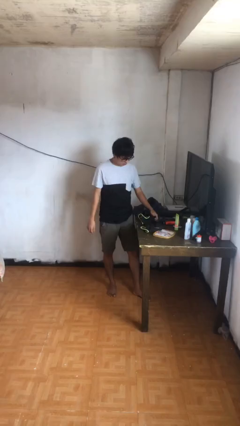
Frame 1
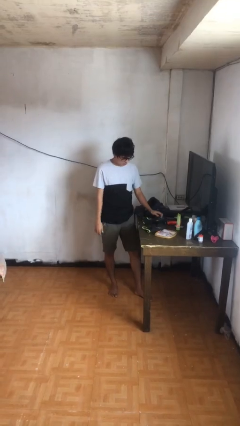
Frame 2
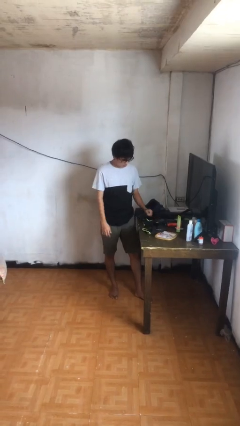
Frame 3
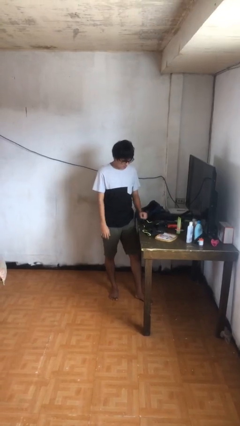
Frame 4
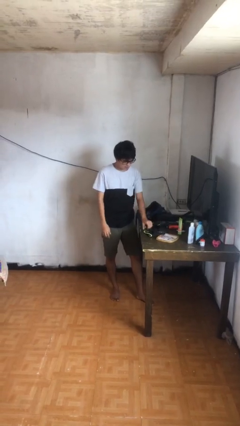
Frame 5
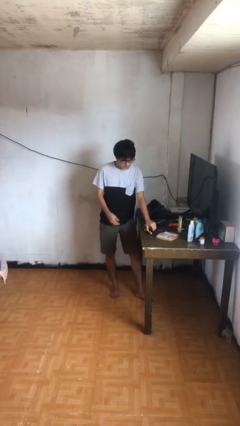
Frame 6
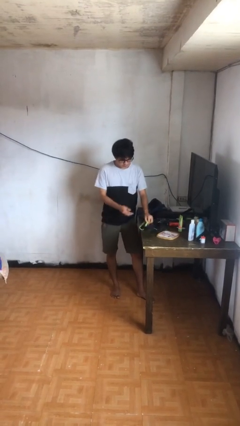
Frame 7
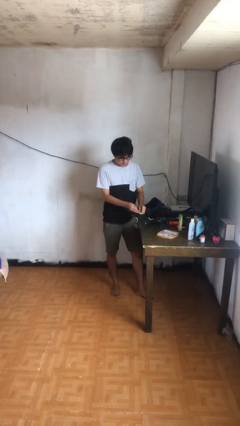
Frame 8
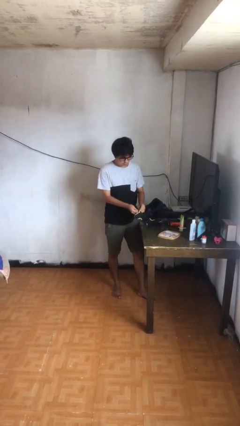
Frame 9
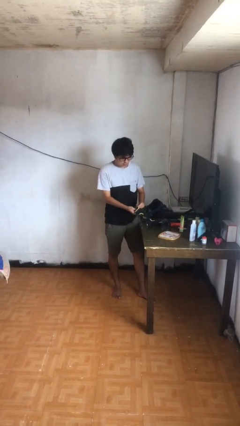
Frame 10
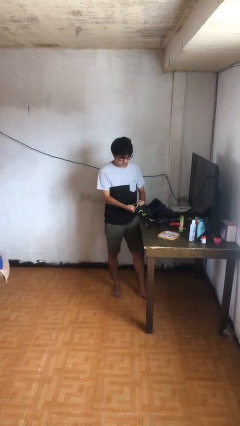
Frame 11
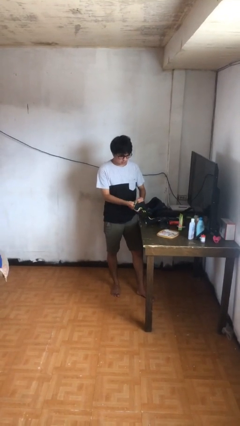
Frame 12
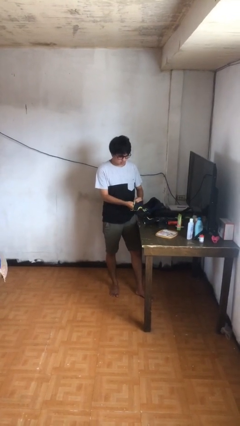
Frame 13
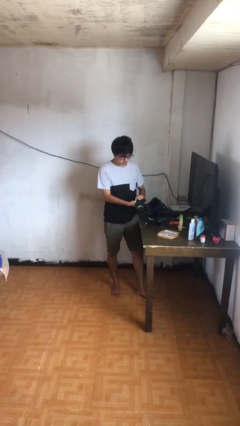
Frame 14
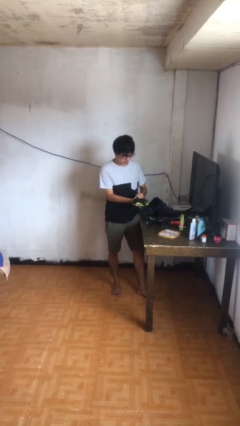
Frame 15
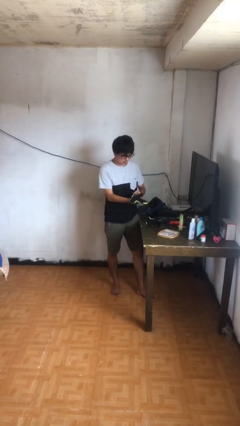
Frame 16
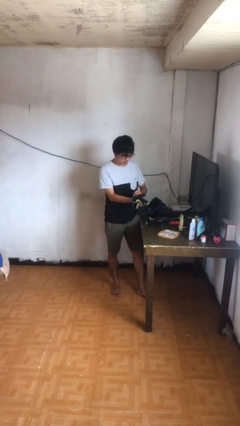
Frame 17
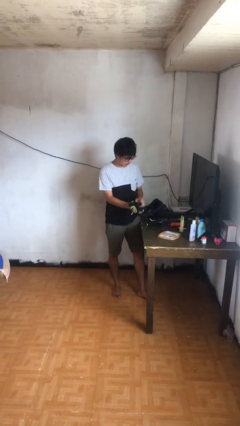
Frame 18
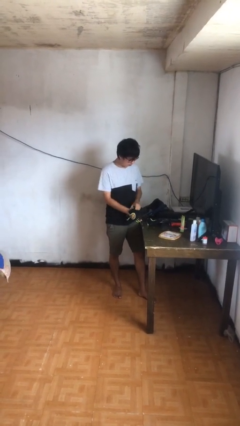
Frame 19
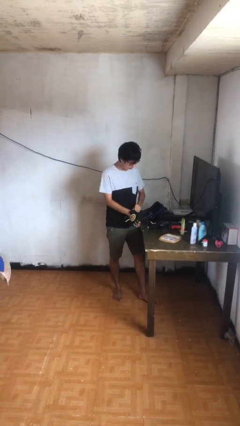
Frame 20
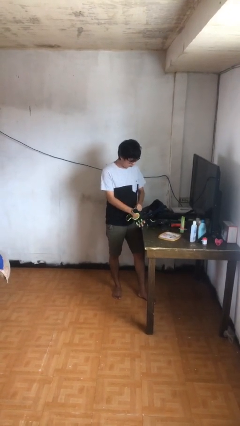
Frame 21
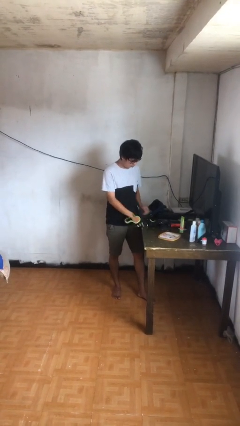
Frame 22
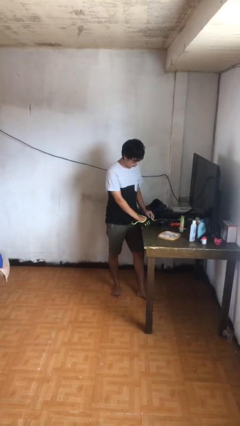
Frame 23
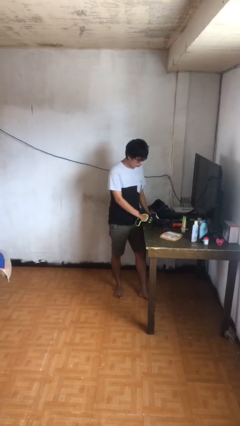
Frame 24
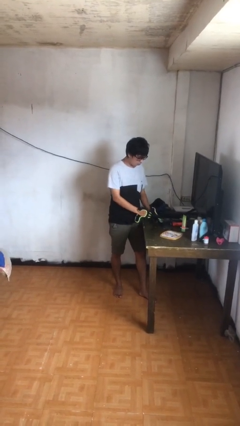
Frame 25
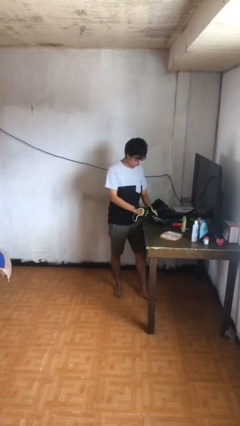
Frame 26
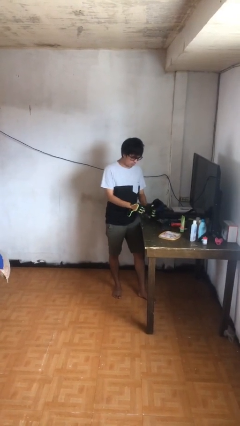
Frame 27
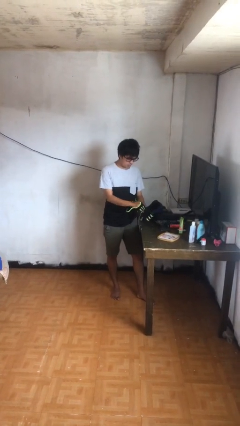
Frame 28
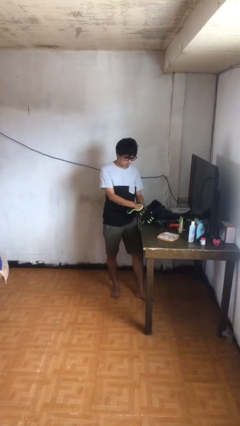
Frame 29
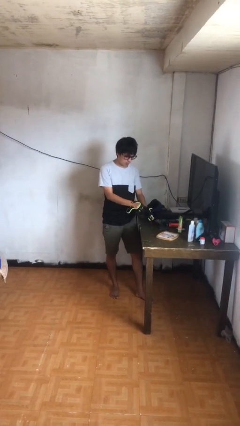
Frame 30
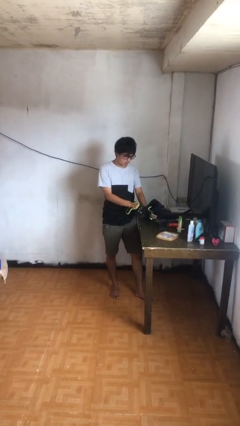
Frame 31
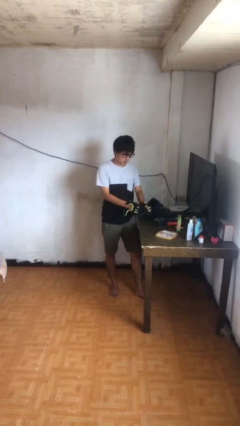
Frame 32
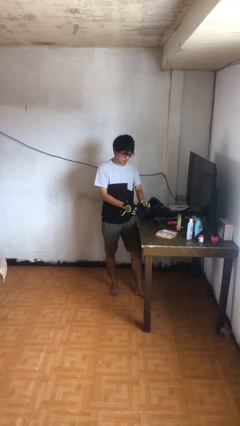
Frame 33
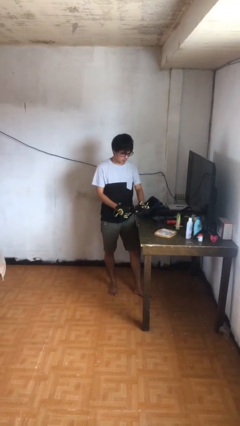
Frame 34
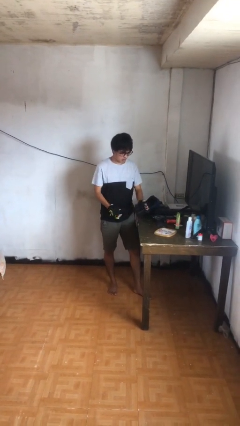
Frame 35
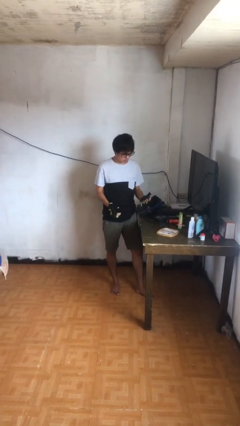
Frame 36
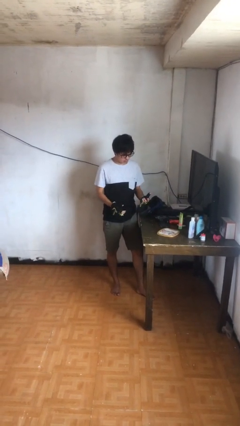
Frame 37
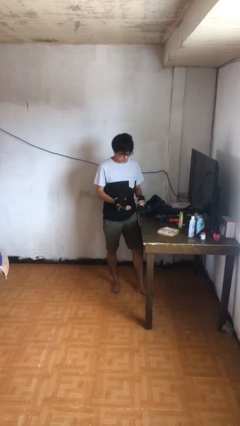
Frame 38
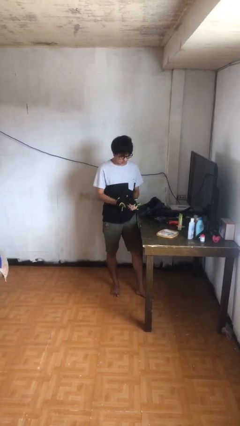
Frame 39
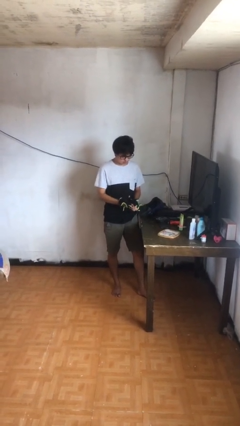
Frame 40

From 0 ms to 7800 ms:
person puts on gloves

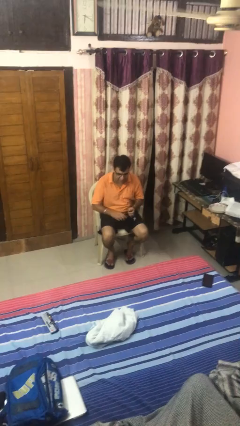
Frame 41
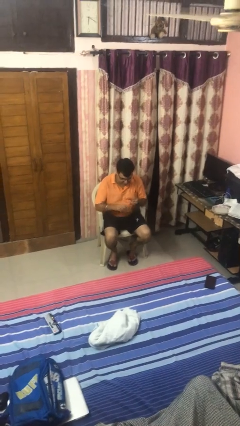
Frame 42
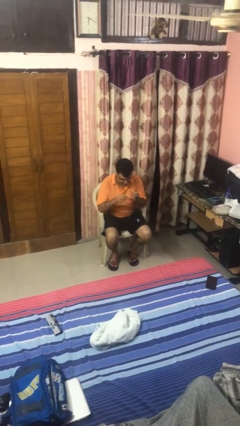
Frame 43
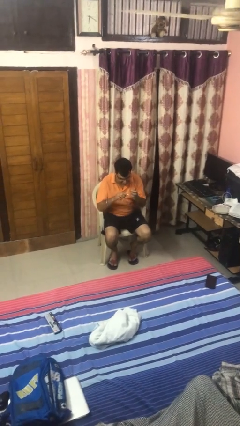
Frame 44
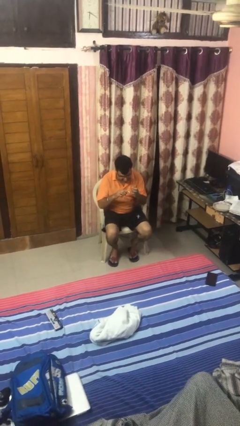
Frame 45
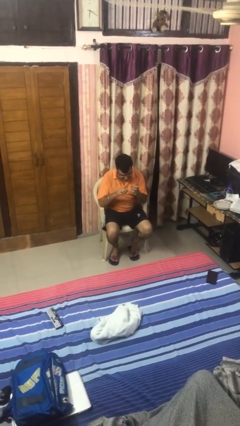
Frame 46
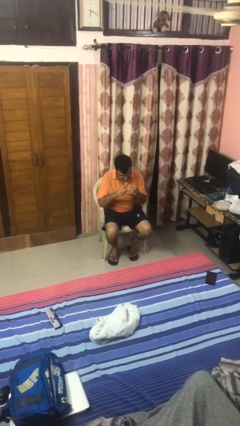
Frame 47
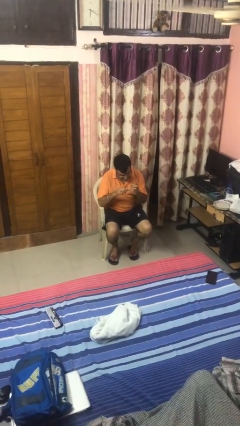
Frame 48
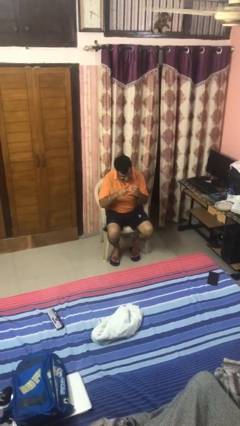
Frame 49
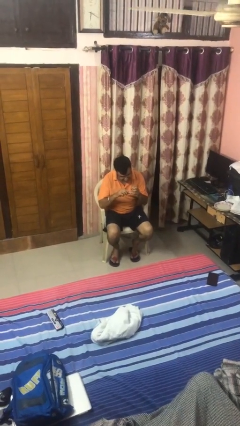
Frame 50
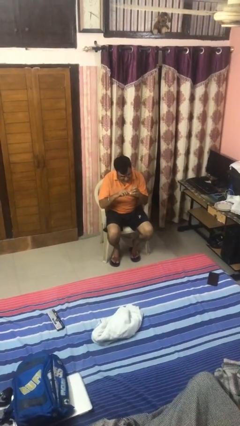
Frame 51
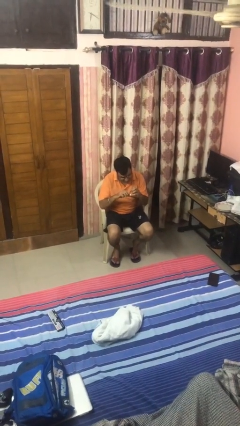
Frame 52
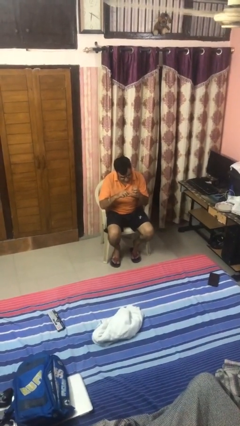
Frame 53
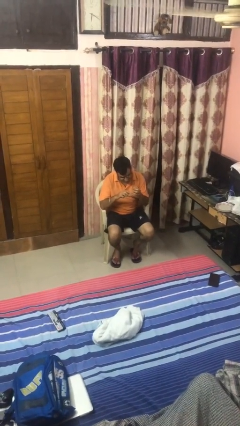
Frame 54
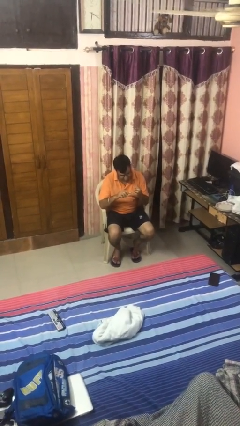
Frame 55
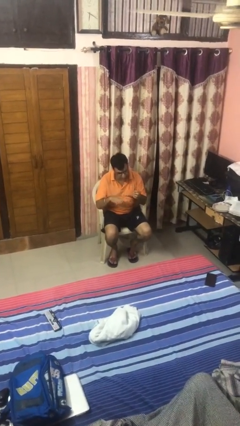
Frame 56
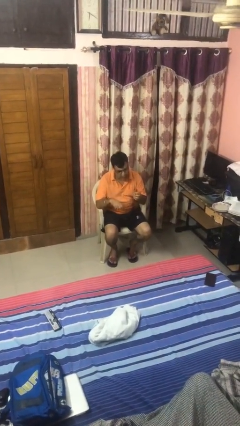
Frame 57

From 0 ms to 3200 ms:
person clips fingernails

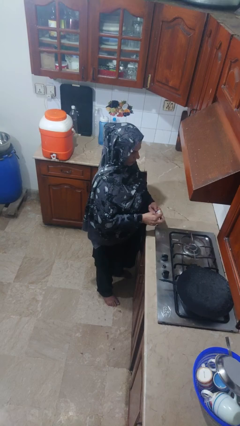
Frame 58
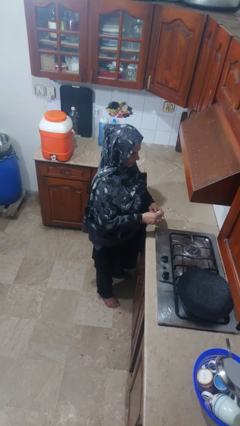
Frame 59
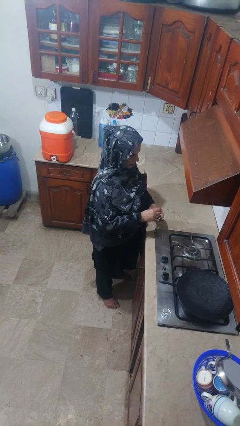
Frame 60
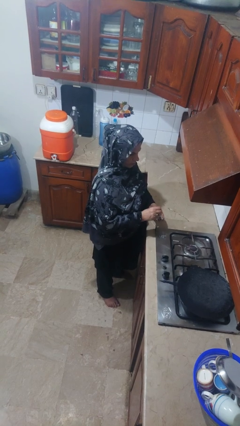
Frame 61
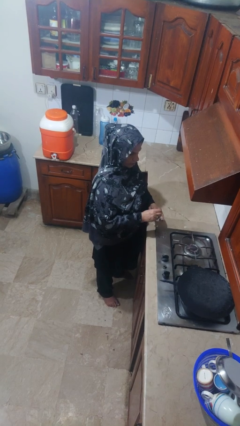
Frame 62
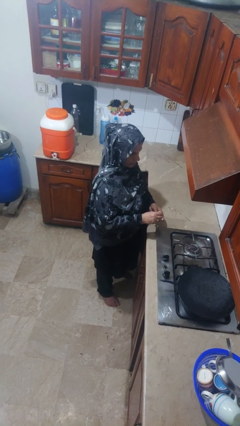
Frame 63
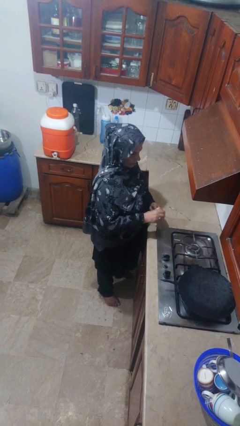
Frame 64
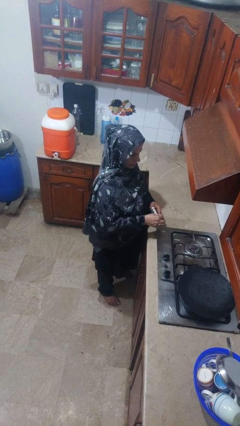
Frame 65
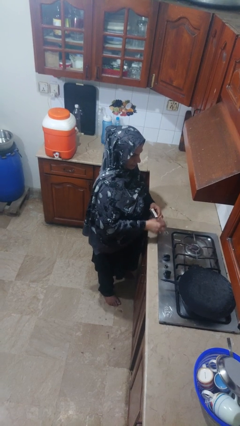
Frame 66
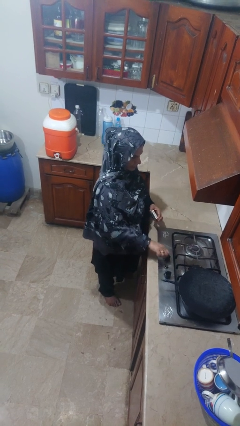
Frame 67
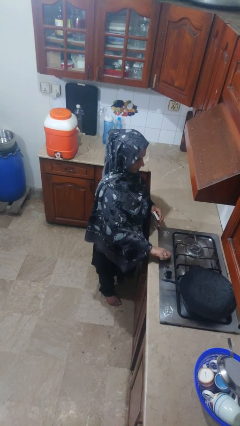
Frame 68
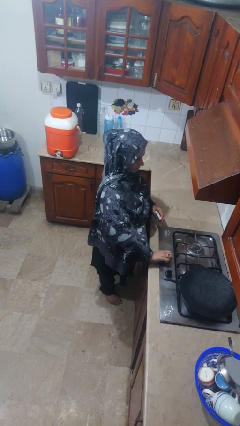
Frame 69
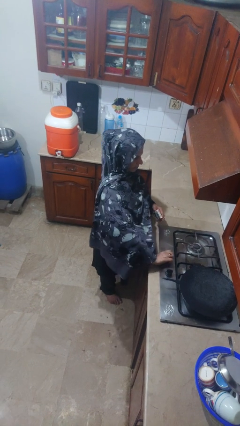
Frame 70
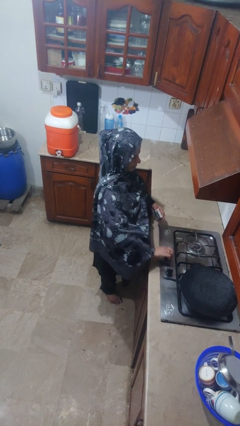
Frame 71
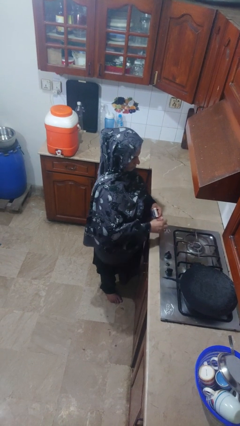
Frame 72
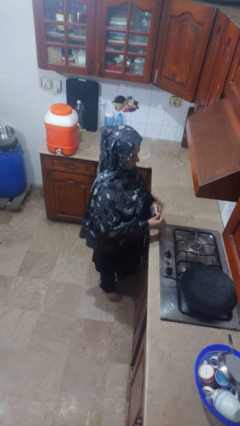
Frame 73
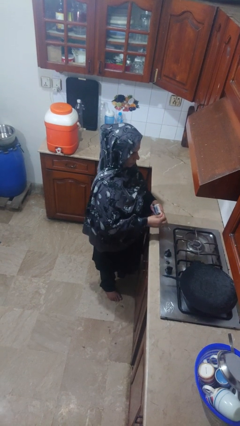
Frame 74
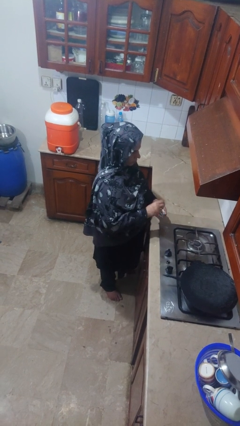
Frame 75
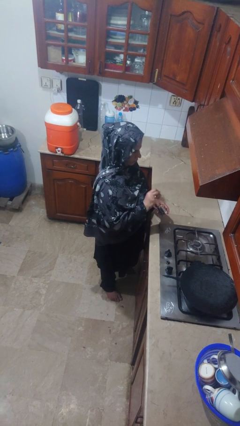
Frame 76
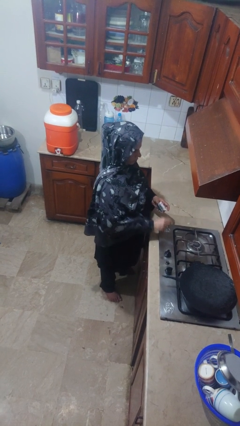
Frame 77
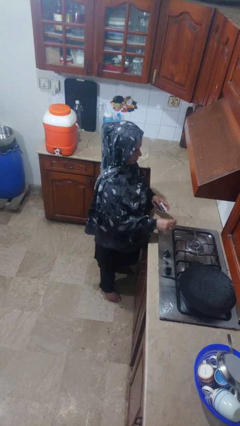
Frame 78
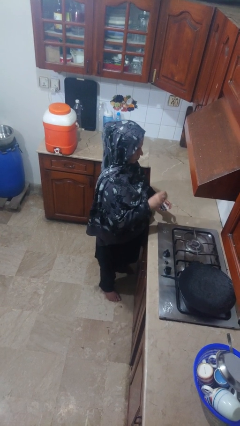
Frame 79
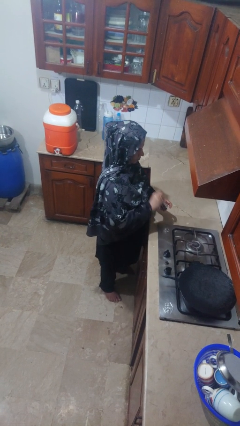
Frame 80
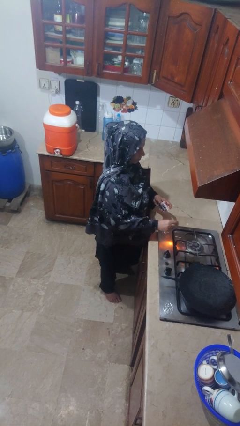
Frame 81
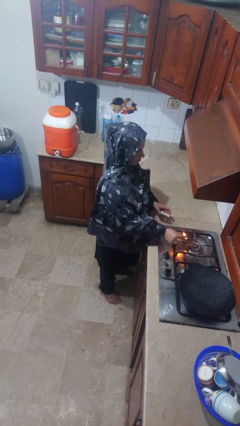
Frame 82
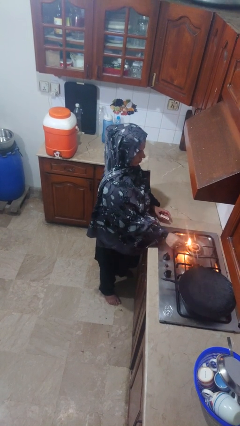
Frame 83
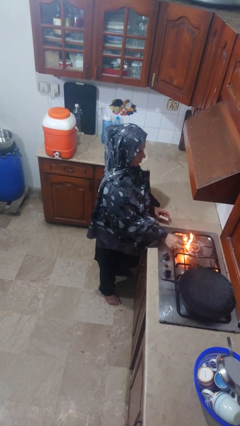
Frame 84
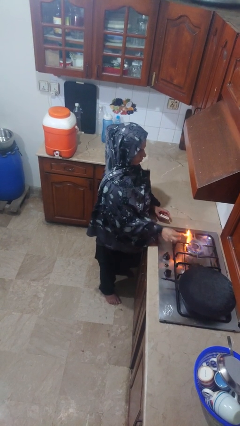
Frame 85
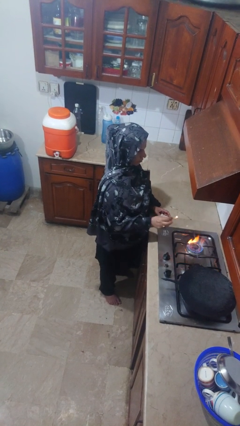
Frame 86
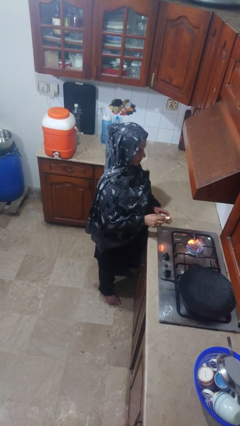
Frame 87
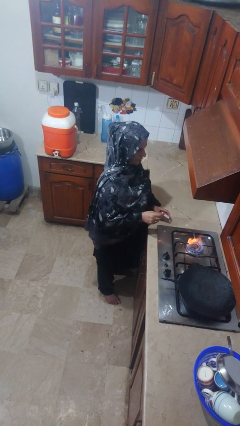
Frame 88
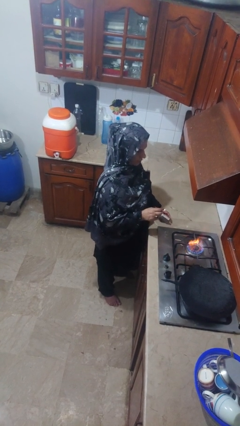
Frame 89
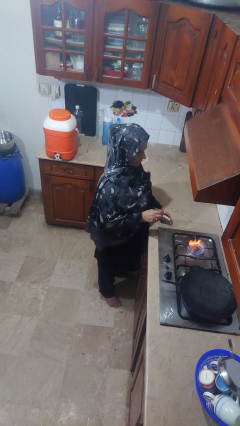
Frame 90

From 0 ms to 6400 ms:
person turns on stovetop

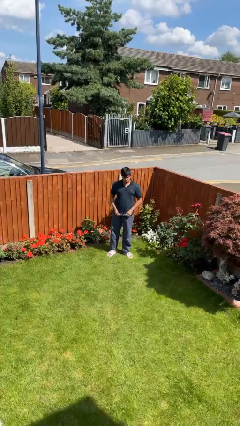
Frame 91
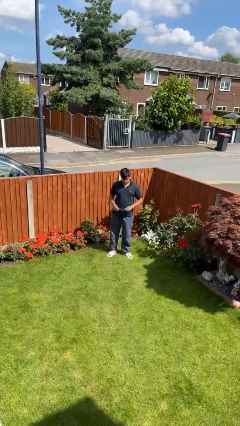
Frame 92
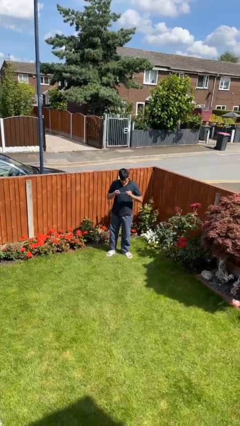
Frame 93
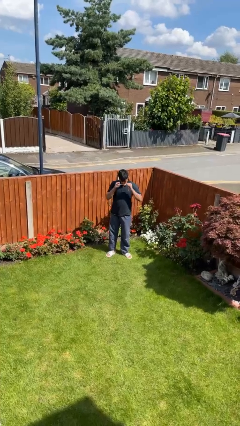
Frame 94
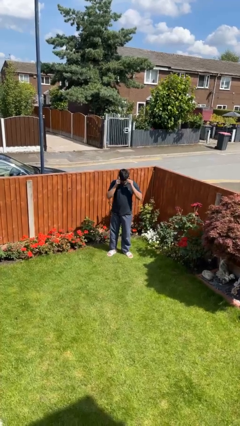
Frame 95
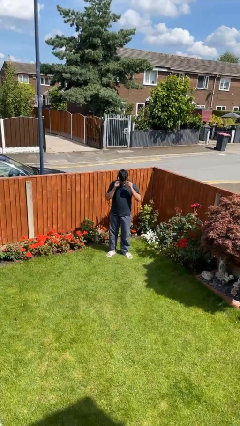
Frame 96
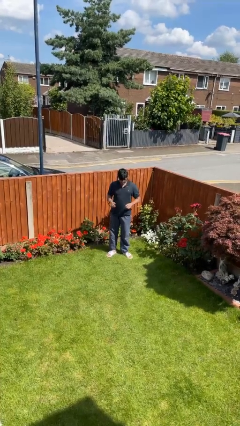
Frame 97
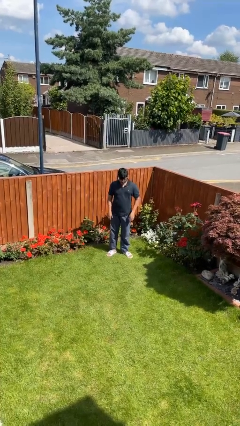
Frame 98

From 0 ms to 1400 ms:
person puts on glasses
